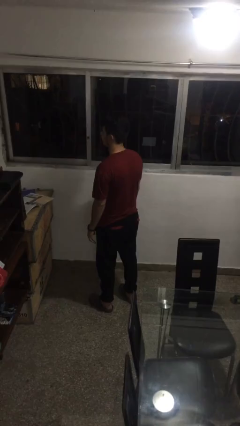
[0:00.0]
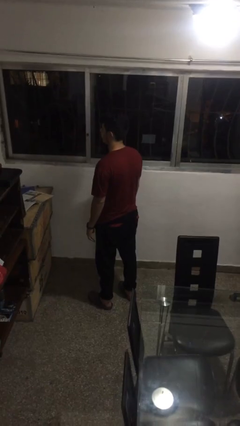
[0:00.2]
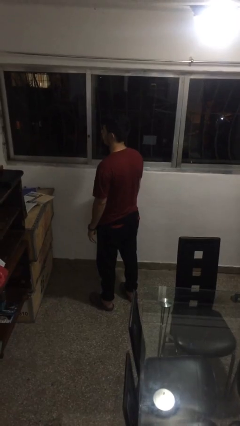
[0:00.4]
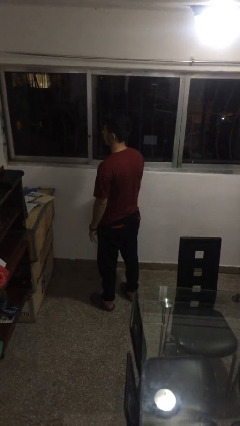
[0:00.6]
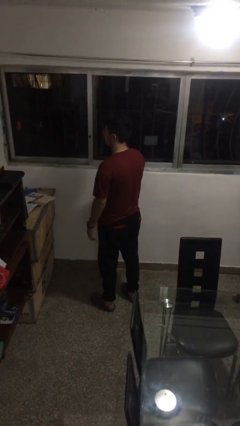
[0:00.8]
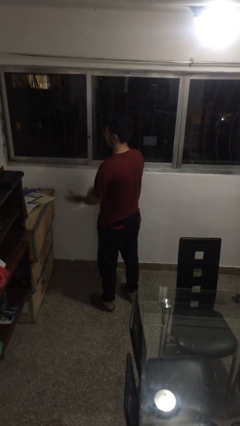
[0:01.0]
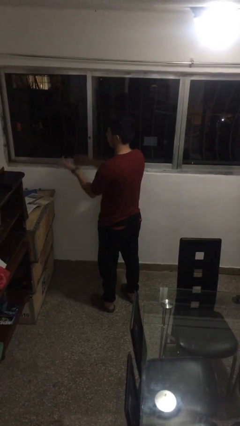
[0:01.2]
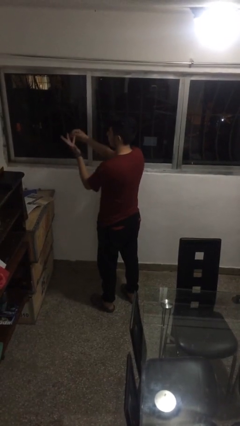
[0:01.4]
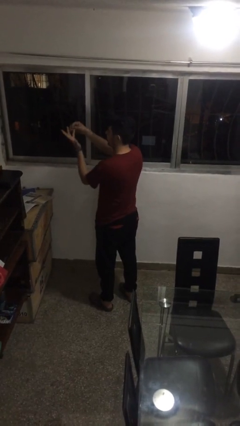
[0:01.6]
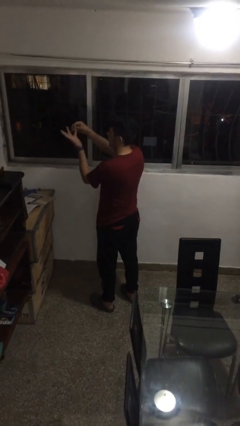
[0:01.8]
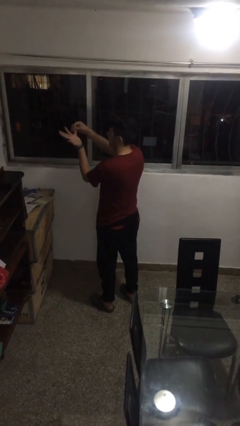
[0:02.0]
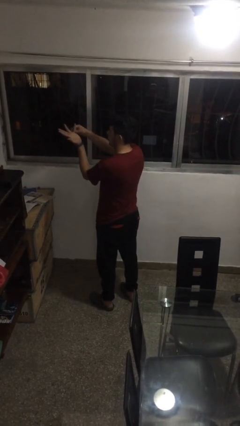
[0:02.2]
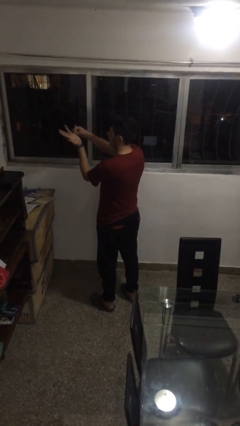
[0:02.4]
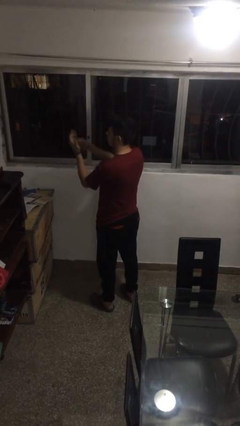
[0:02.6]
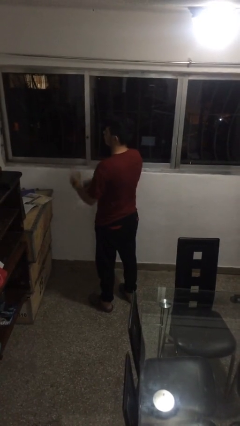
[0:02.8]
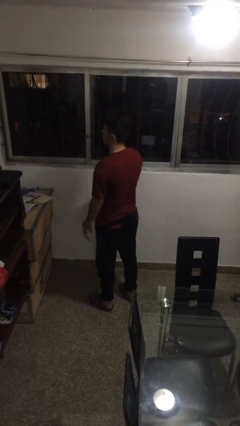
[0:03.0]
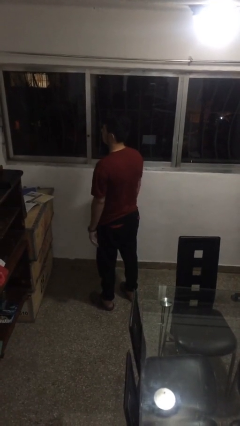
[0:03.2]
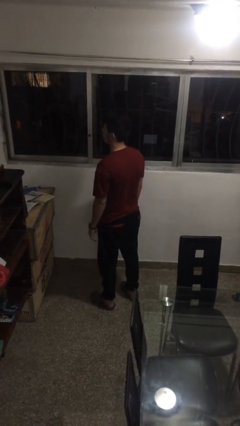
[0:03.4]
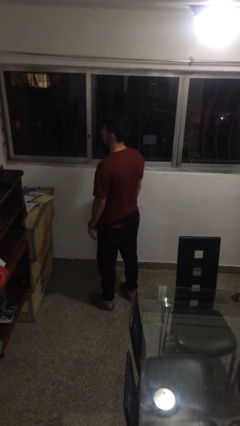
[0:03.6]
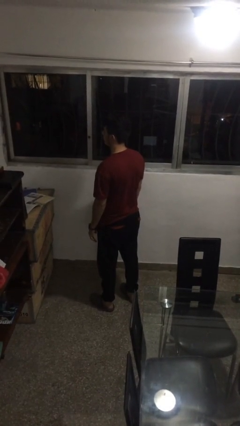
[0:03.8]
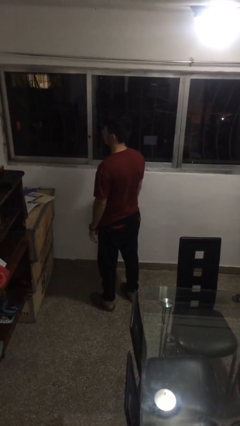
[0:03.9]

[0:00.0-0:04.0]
person puts on ring

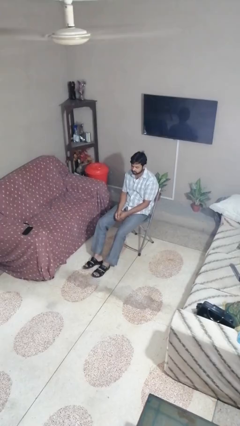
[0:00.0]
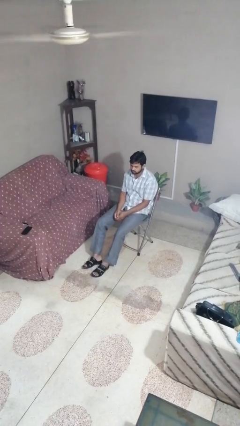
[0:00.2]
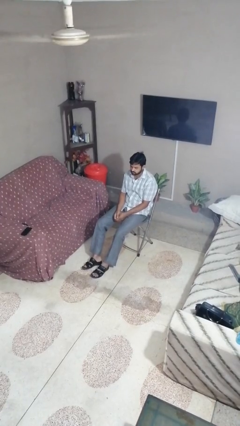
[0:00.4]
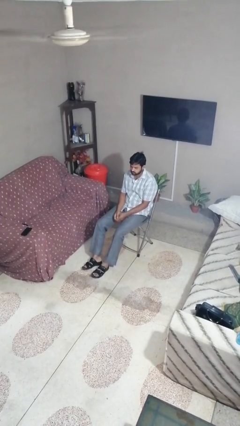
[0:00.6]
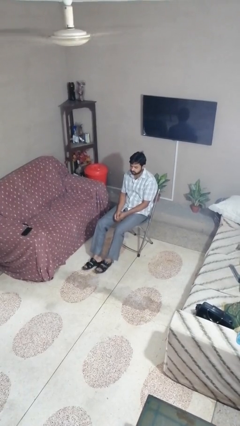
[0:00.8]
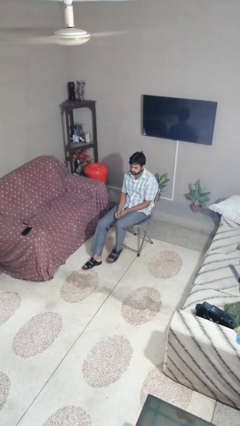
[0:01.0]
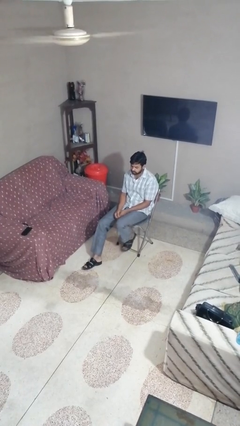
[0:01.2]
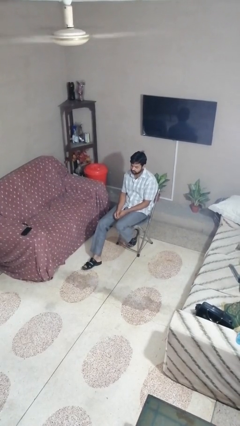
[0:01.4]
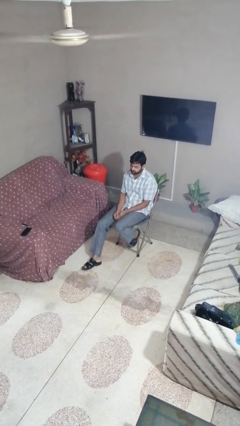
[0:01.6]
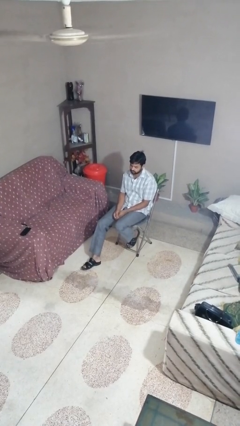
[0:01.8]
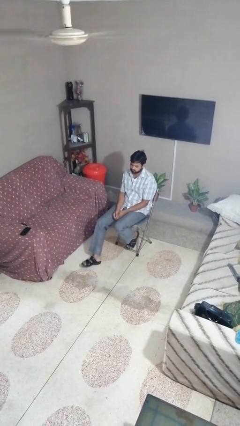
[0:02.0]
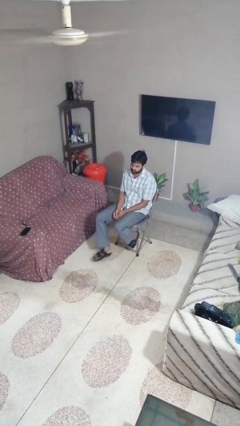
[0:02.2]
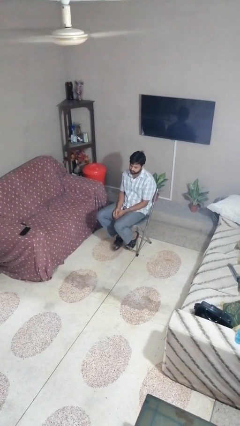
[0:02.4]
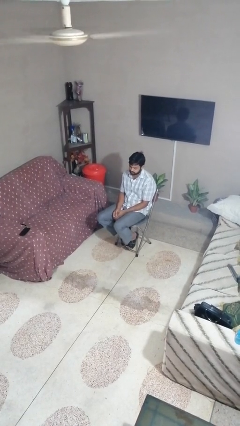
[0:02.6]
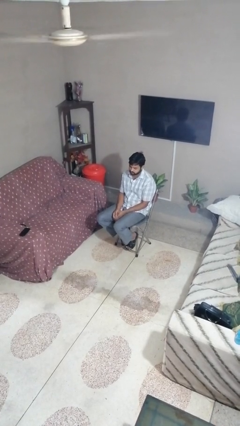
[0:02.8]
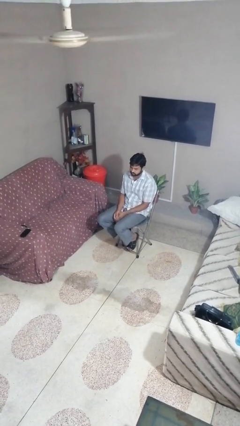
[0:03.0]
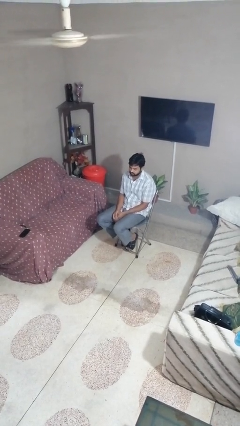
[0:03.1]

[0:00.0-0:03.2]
person puts feet up

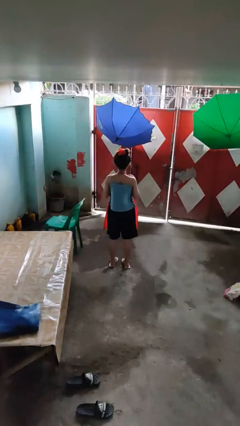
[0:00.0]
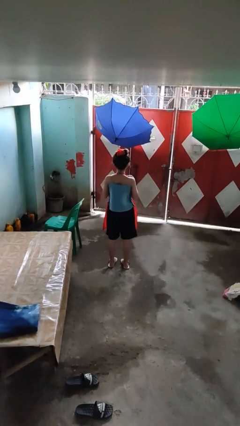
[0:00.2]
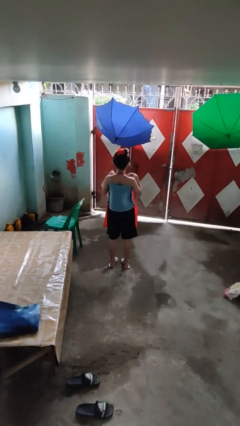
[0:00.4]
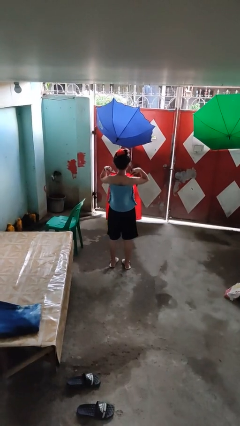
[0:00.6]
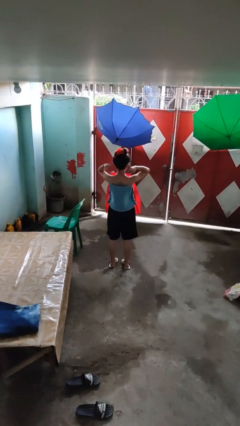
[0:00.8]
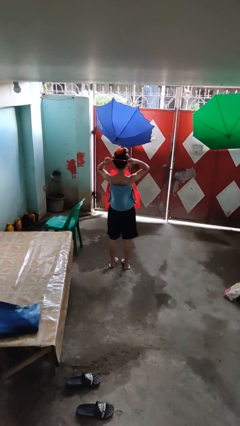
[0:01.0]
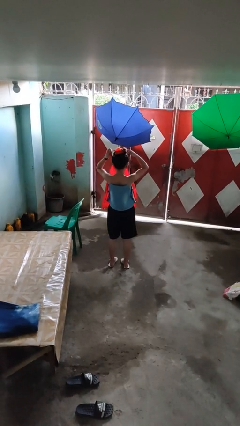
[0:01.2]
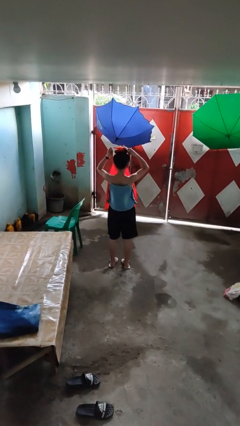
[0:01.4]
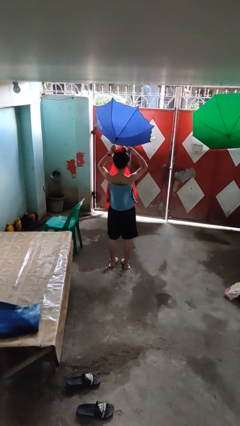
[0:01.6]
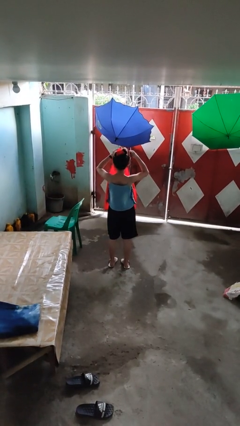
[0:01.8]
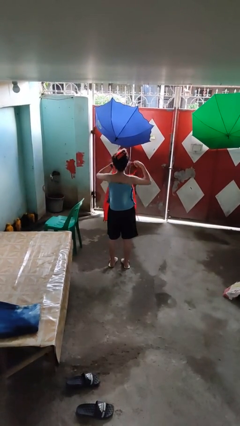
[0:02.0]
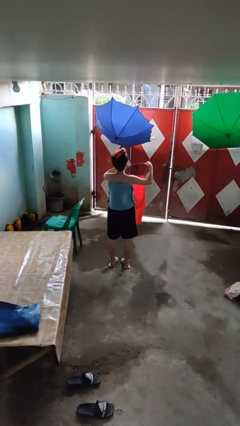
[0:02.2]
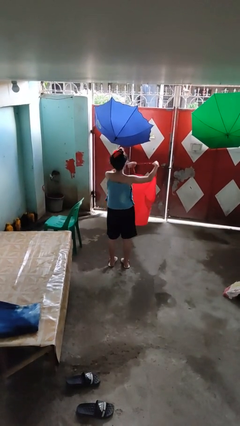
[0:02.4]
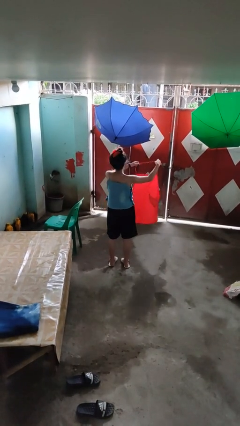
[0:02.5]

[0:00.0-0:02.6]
person takes off apron

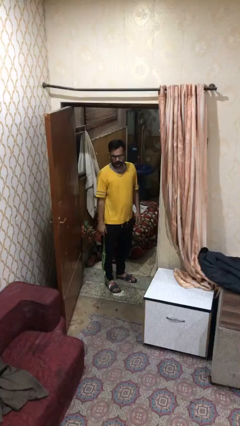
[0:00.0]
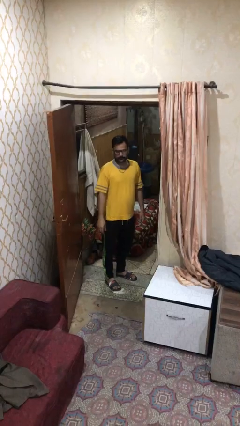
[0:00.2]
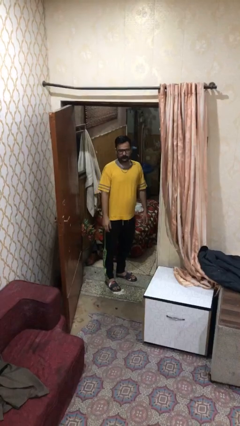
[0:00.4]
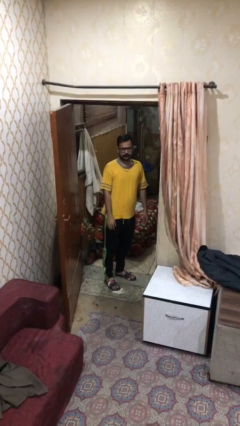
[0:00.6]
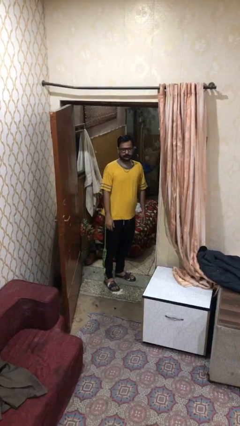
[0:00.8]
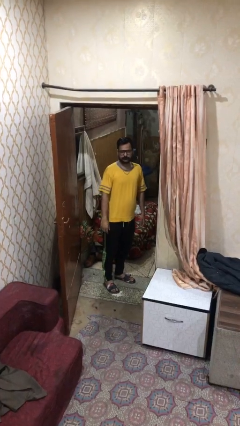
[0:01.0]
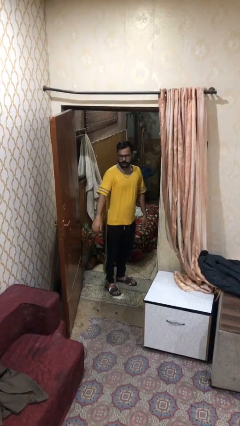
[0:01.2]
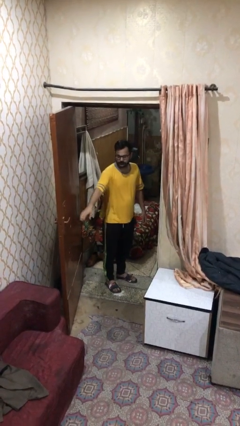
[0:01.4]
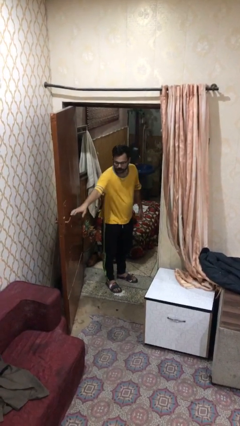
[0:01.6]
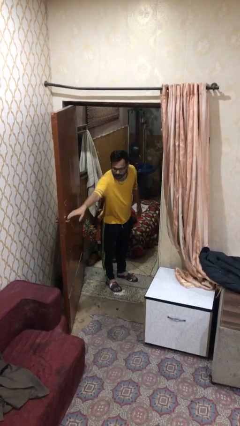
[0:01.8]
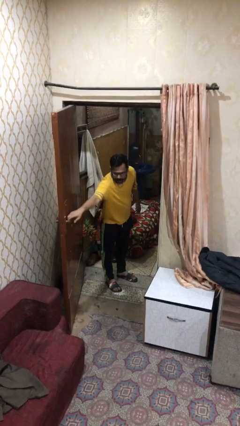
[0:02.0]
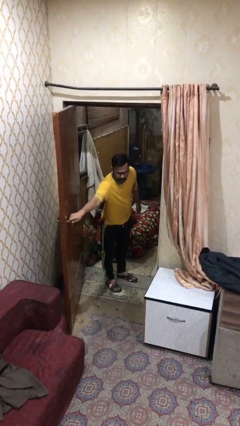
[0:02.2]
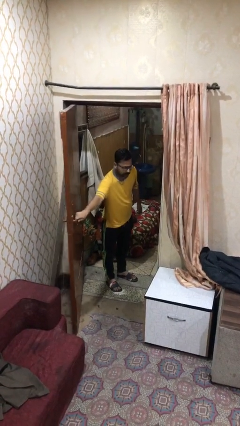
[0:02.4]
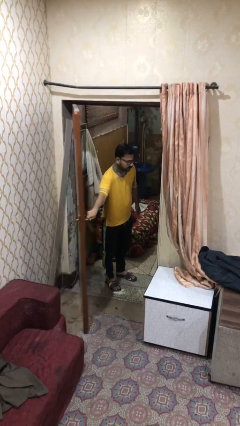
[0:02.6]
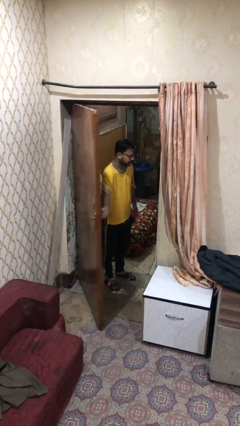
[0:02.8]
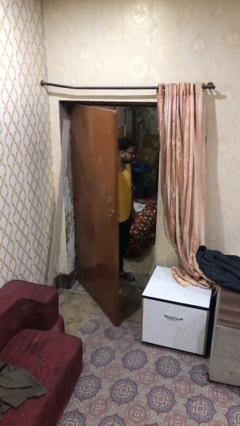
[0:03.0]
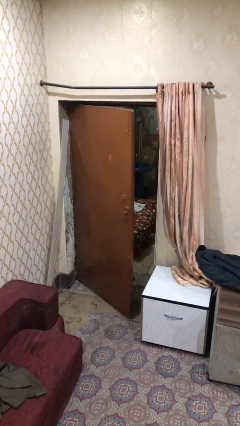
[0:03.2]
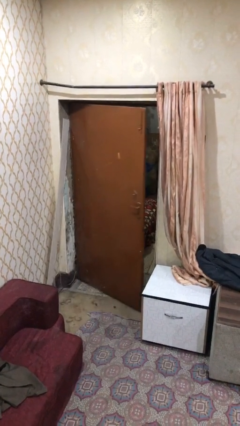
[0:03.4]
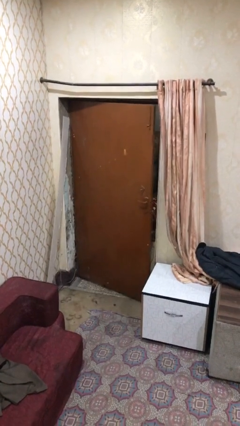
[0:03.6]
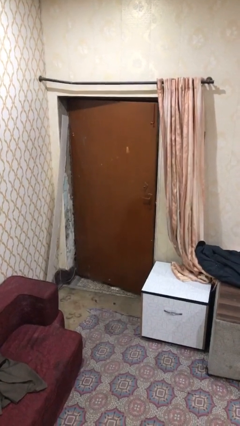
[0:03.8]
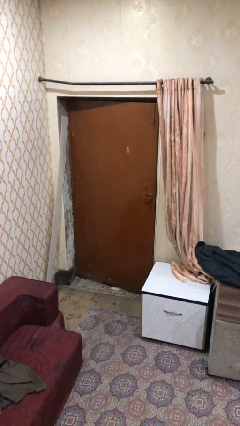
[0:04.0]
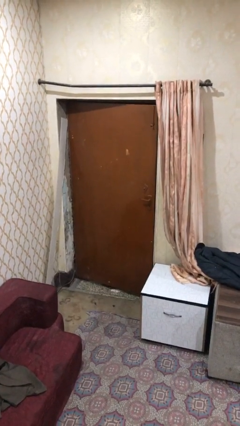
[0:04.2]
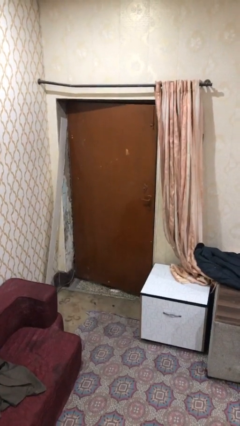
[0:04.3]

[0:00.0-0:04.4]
person closes facility door

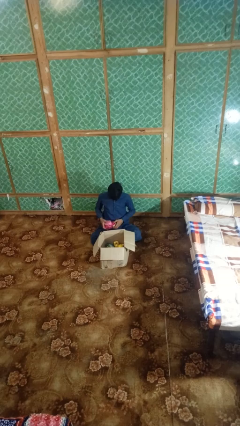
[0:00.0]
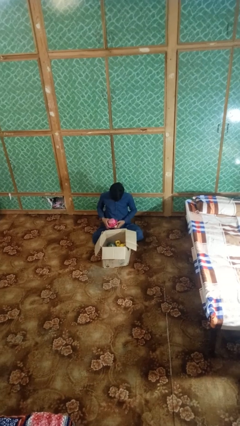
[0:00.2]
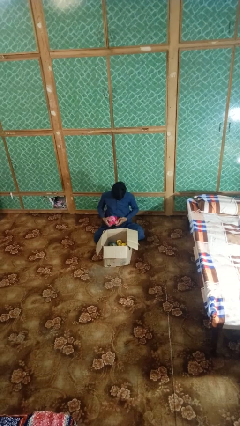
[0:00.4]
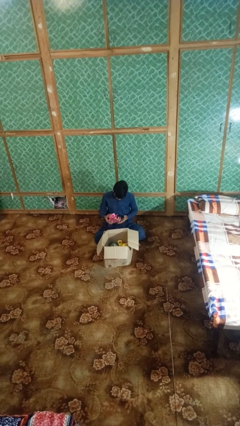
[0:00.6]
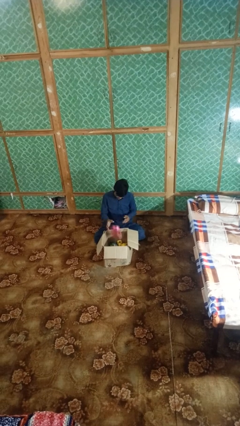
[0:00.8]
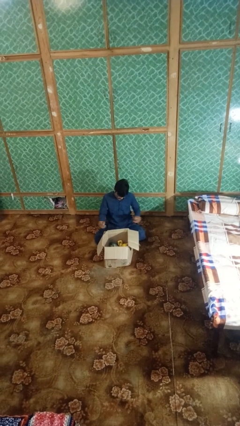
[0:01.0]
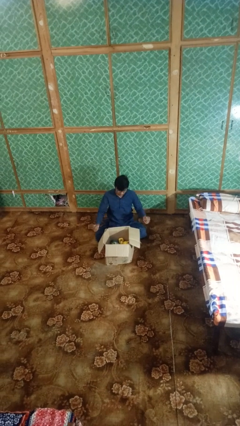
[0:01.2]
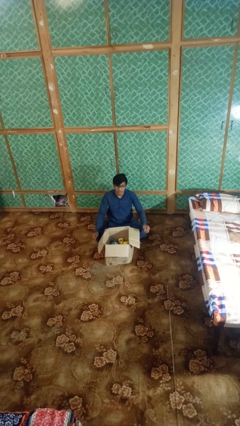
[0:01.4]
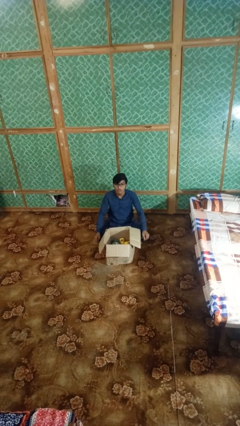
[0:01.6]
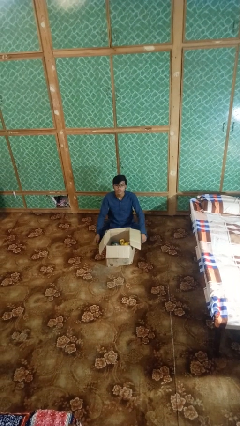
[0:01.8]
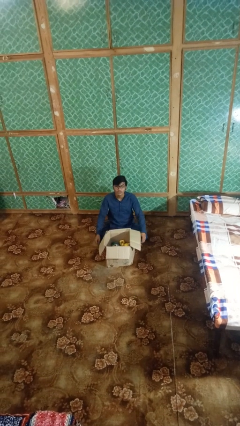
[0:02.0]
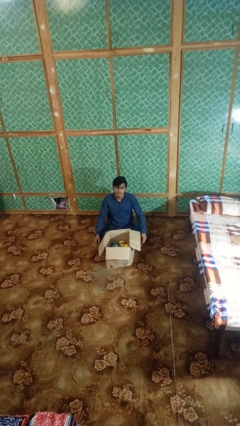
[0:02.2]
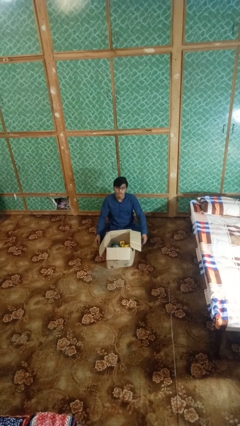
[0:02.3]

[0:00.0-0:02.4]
person puts object into box

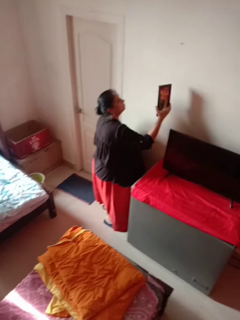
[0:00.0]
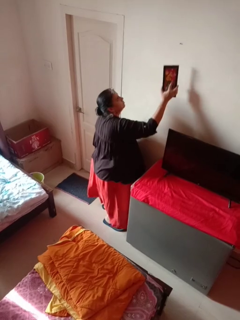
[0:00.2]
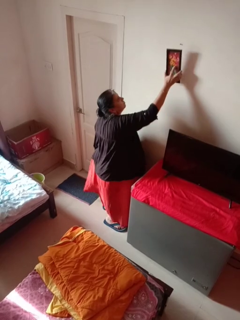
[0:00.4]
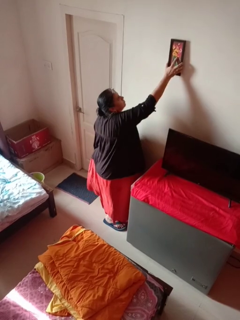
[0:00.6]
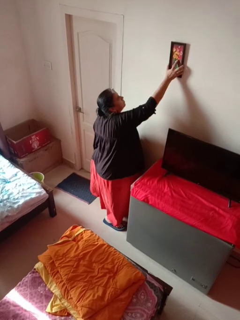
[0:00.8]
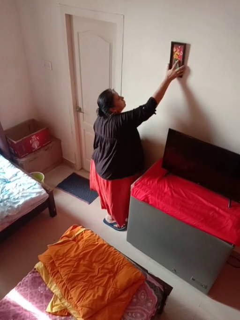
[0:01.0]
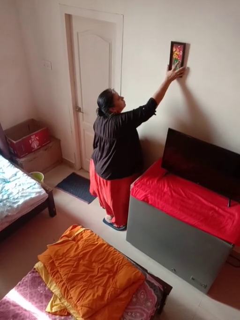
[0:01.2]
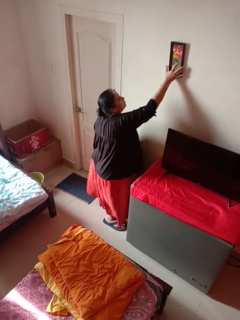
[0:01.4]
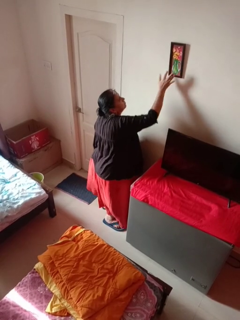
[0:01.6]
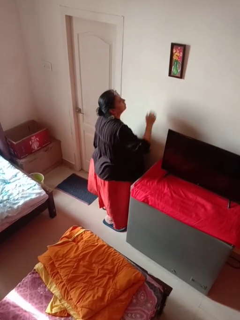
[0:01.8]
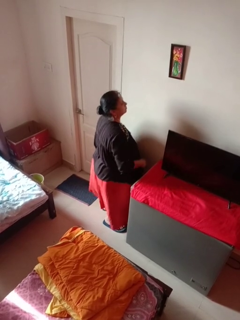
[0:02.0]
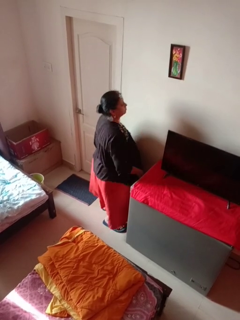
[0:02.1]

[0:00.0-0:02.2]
person puts up picture frame
